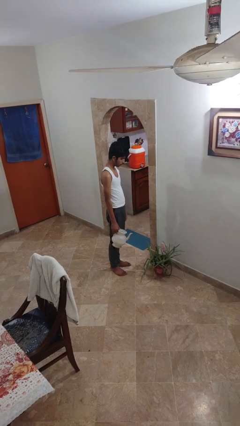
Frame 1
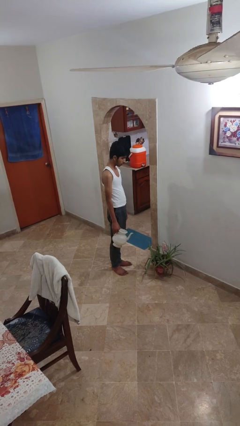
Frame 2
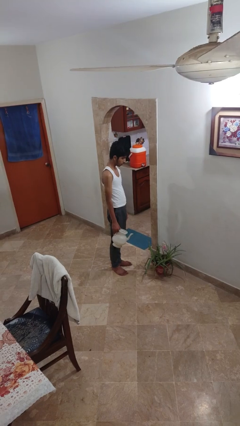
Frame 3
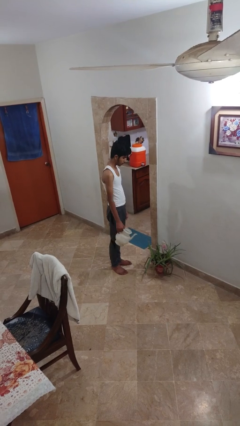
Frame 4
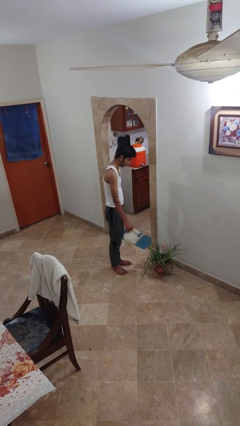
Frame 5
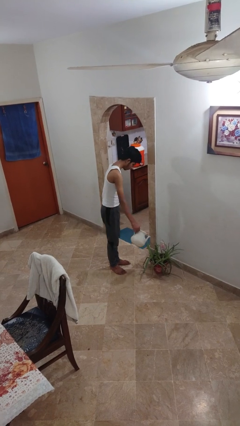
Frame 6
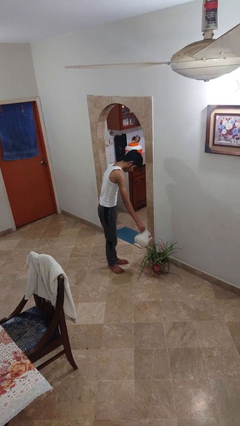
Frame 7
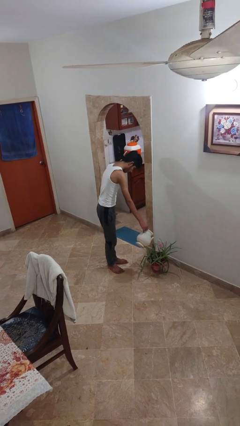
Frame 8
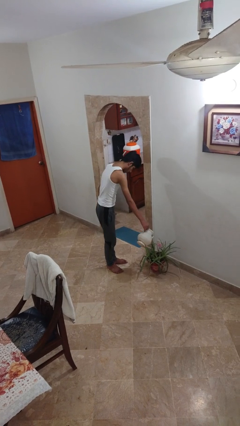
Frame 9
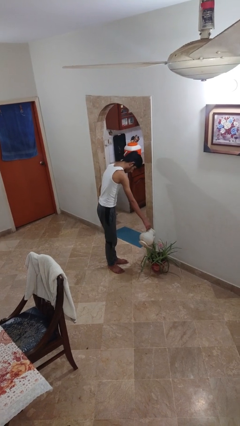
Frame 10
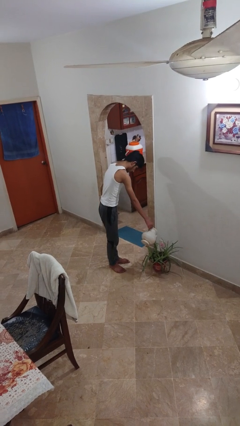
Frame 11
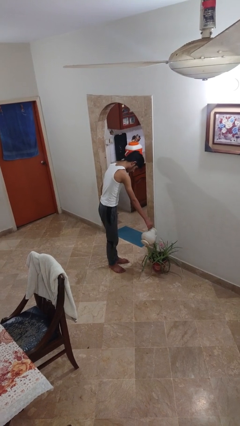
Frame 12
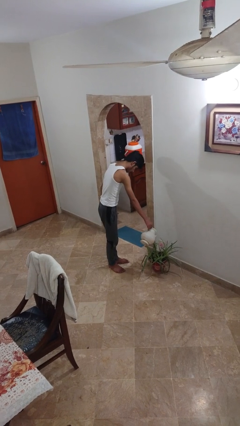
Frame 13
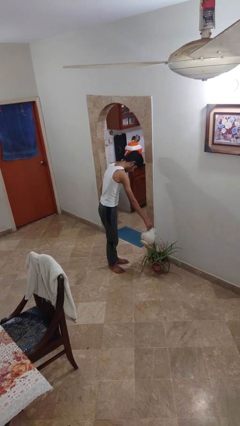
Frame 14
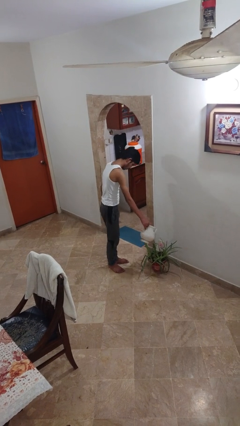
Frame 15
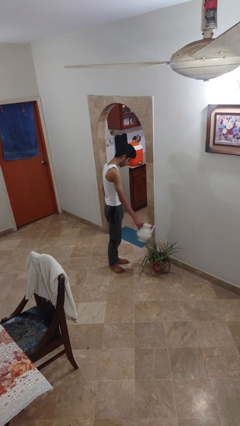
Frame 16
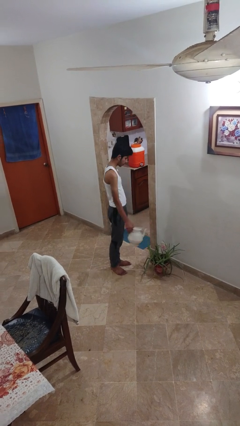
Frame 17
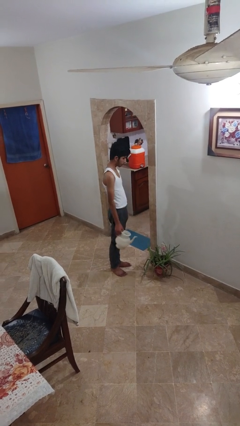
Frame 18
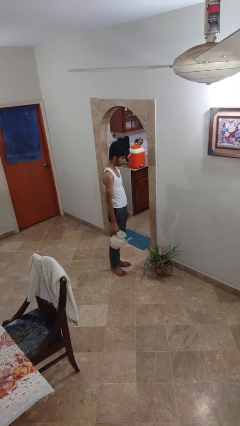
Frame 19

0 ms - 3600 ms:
person waters houseplant

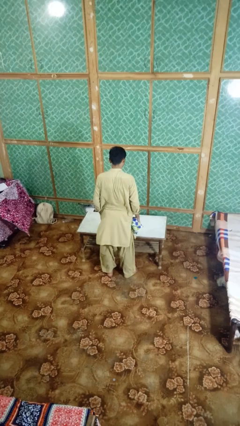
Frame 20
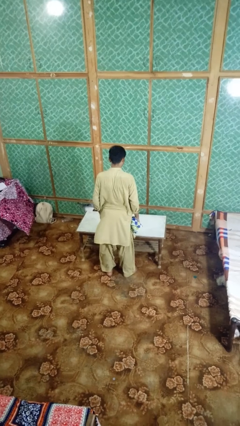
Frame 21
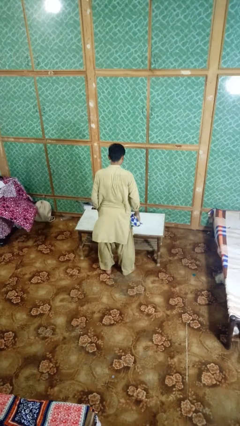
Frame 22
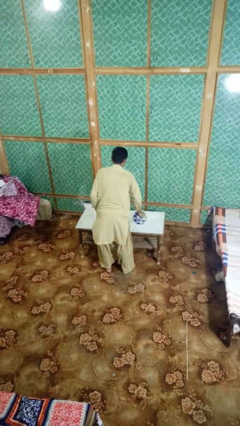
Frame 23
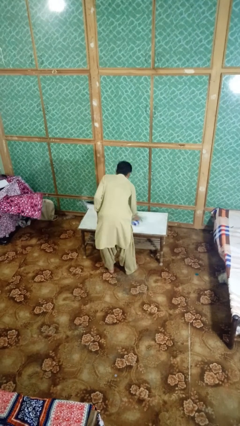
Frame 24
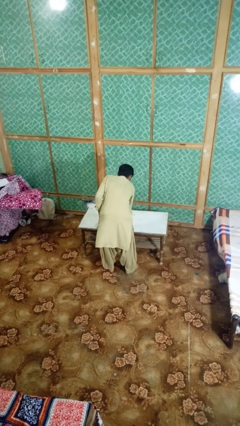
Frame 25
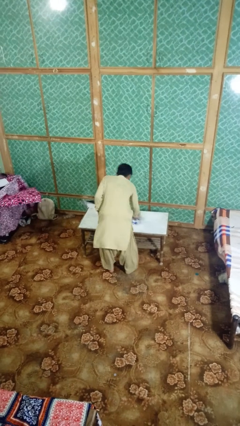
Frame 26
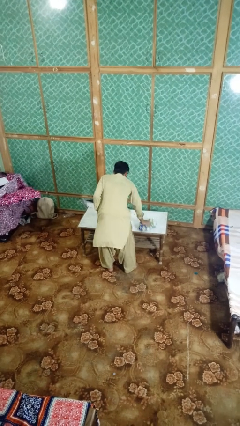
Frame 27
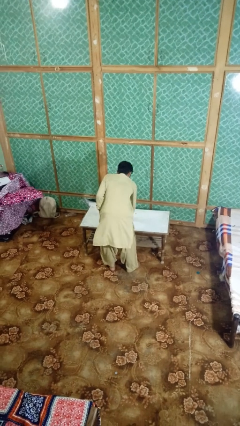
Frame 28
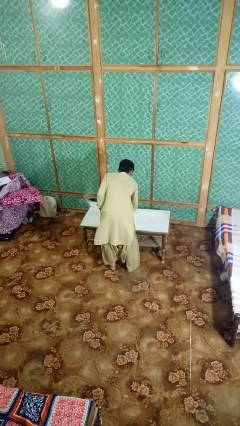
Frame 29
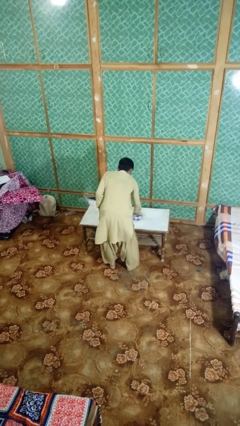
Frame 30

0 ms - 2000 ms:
person cleans table with rag

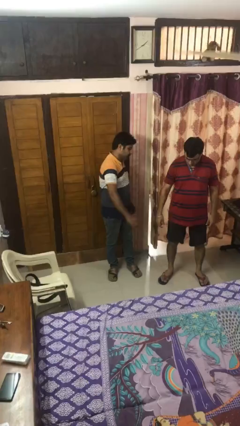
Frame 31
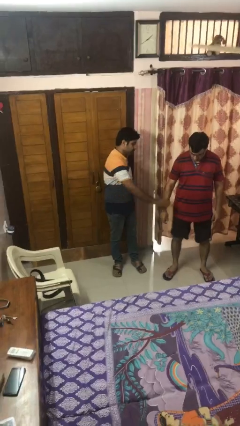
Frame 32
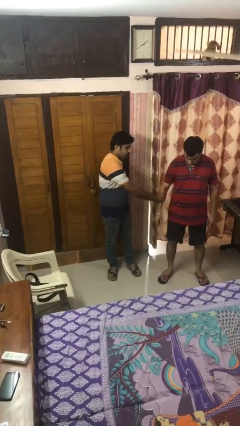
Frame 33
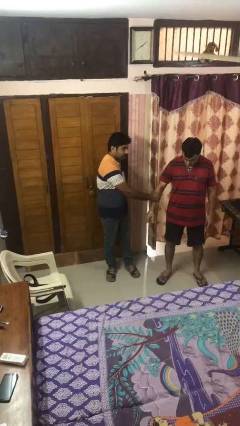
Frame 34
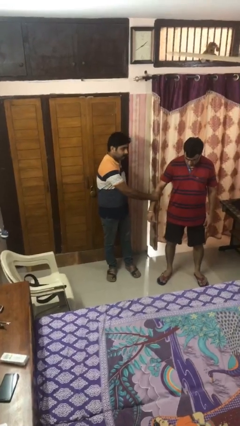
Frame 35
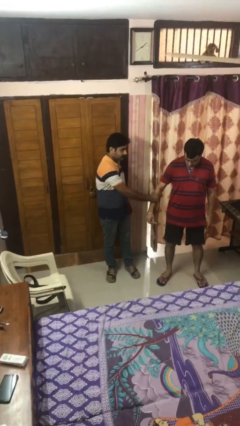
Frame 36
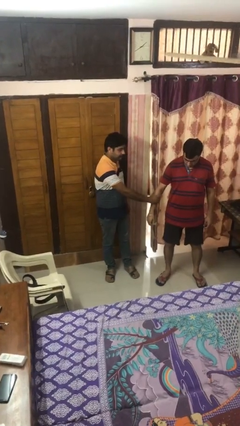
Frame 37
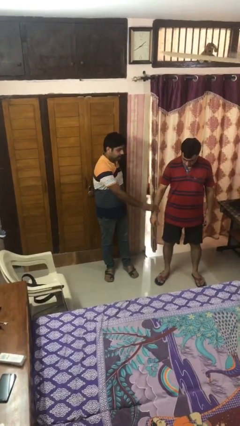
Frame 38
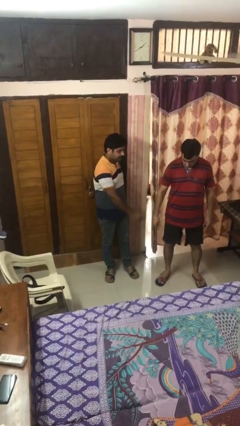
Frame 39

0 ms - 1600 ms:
person grabs person by forearm

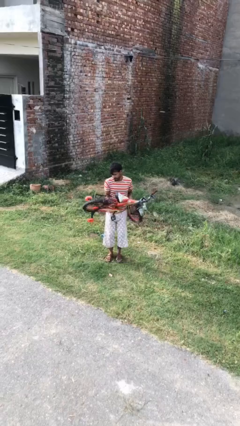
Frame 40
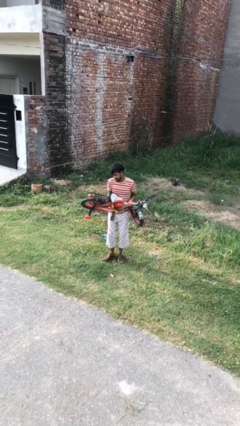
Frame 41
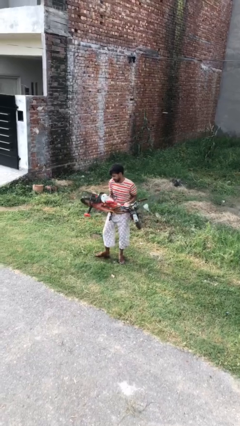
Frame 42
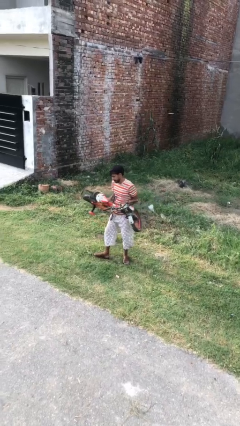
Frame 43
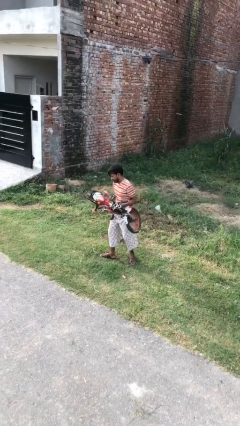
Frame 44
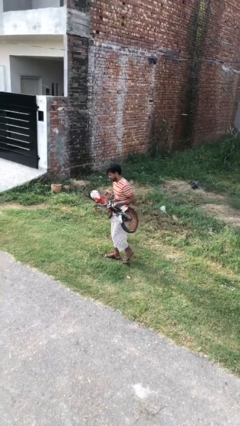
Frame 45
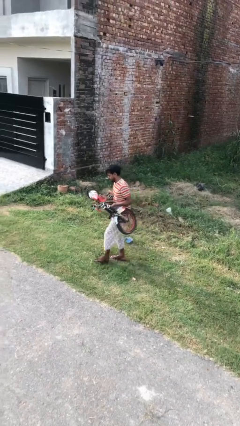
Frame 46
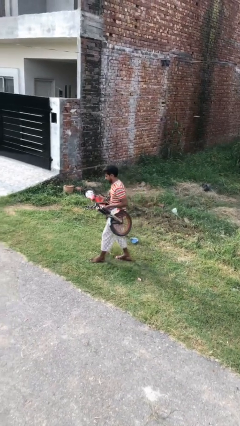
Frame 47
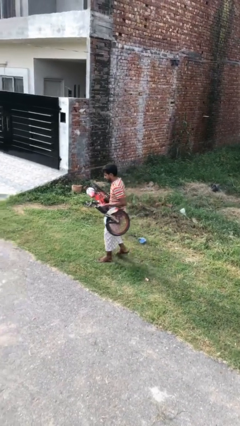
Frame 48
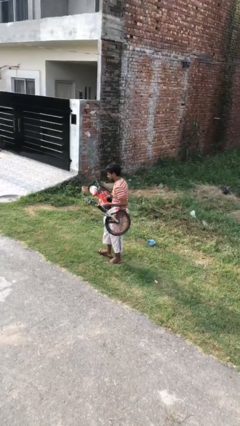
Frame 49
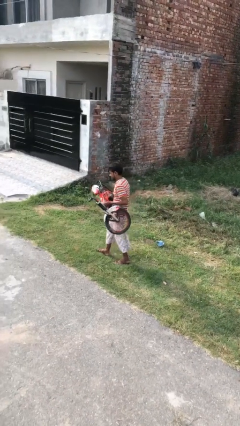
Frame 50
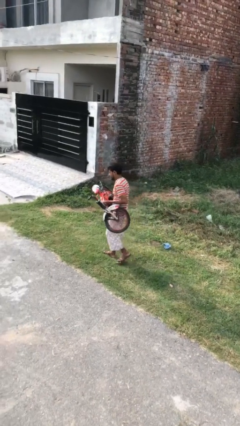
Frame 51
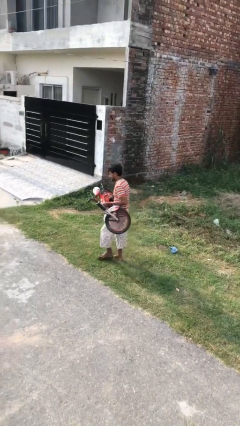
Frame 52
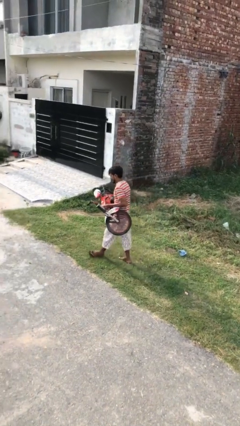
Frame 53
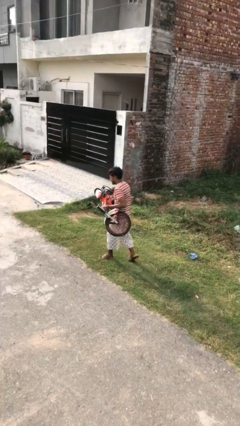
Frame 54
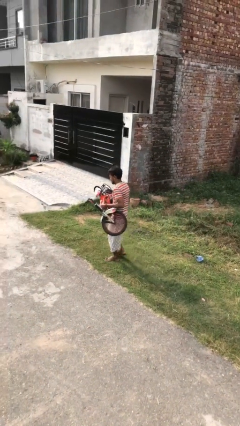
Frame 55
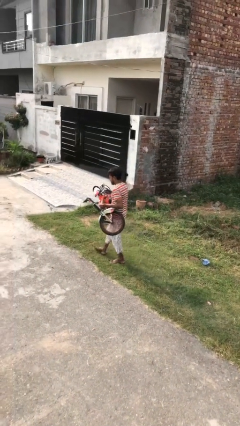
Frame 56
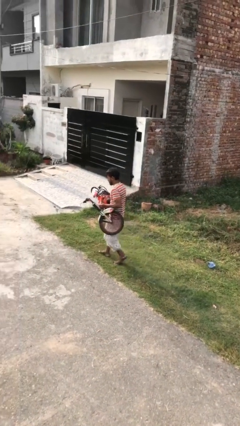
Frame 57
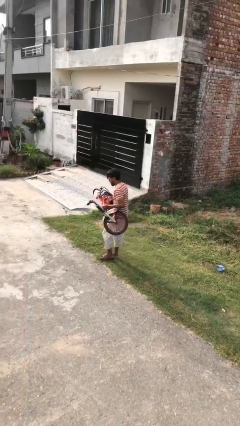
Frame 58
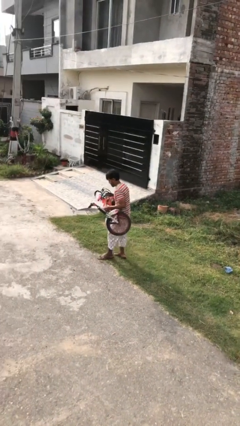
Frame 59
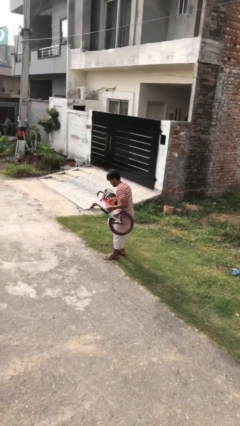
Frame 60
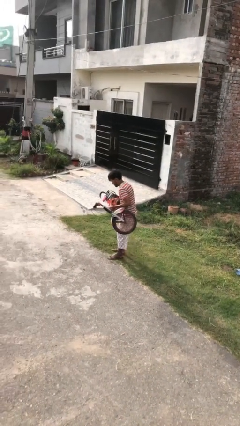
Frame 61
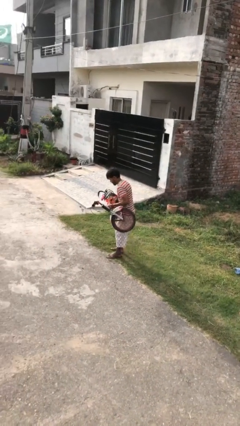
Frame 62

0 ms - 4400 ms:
person carries heavy object

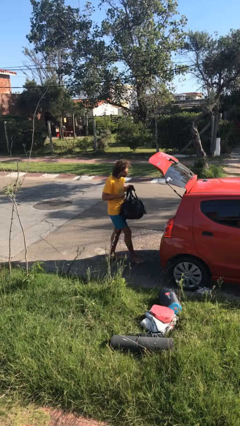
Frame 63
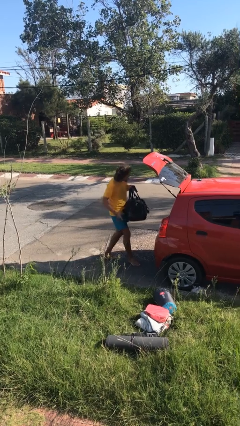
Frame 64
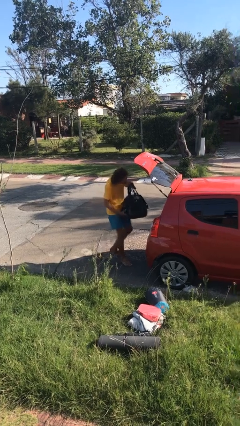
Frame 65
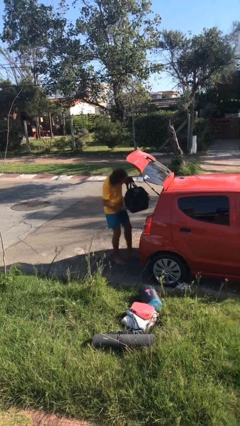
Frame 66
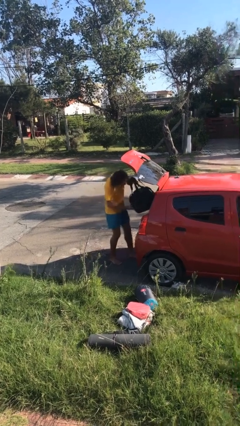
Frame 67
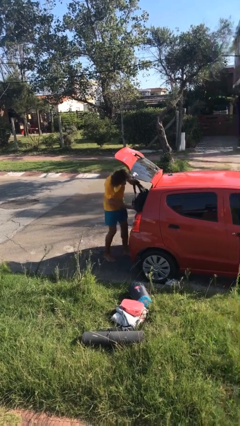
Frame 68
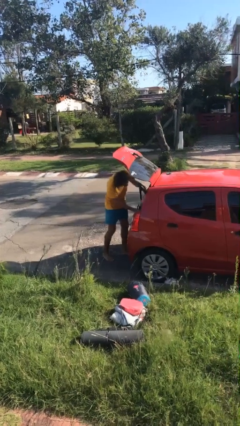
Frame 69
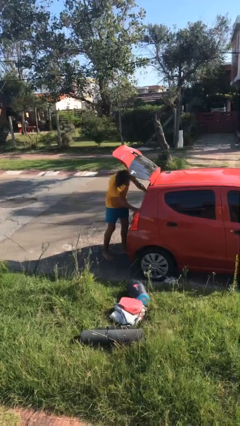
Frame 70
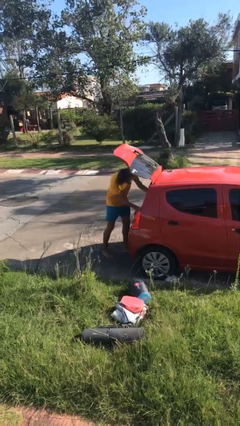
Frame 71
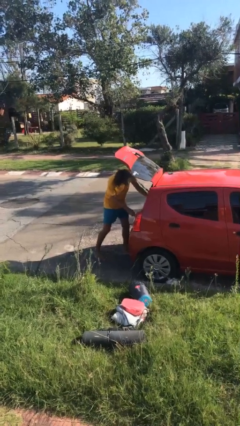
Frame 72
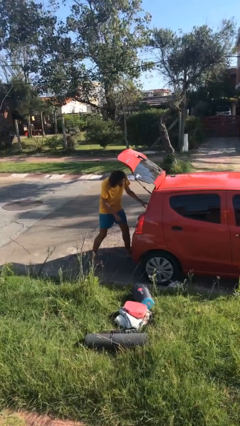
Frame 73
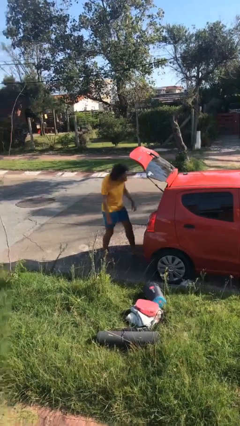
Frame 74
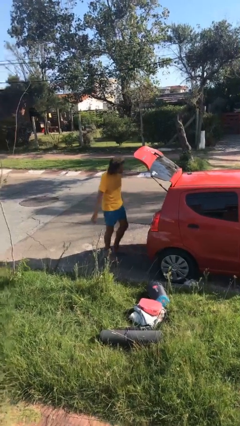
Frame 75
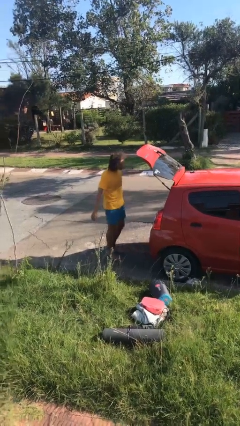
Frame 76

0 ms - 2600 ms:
person loads car

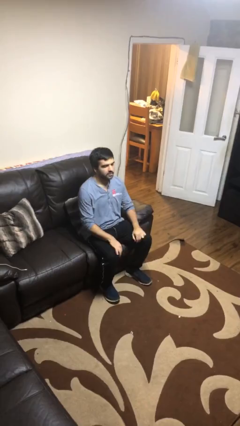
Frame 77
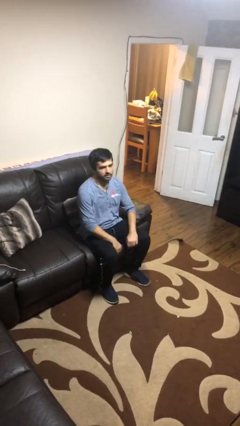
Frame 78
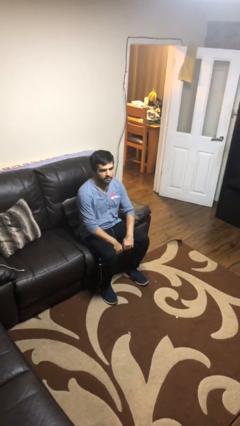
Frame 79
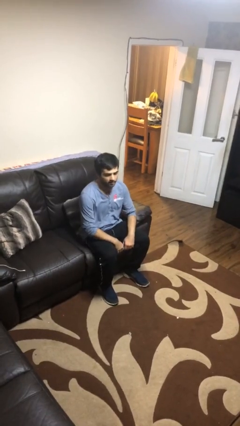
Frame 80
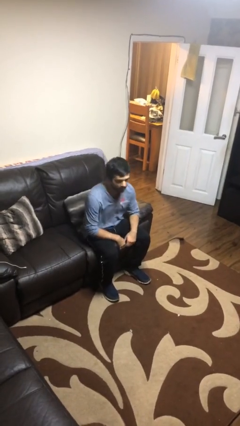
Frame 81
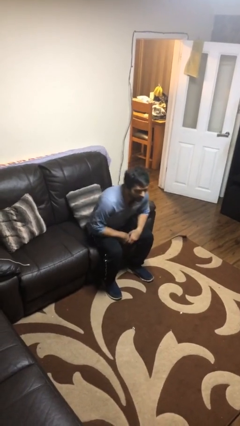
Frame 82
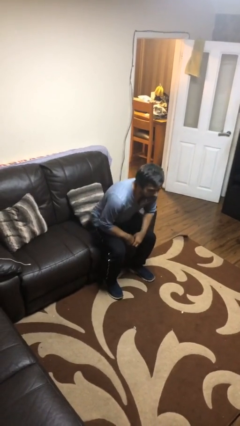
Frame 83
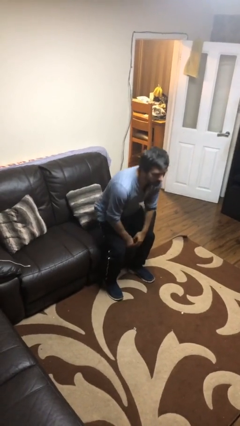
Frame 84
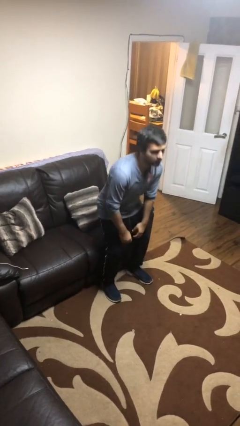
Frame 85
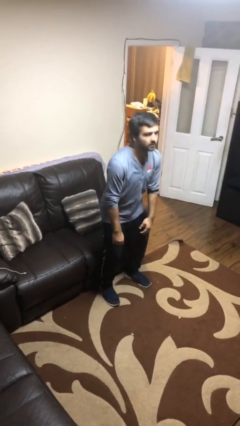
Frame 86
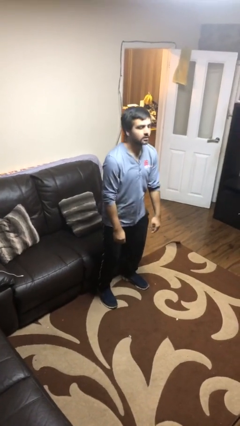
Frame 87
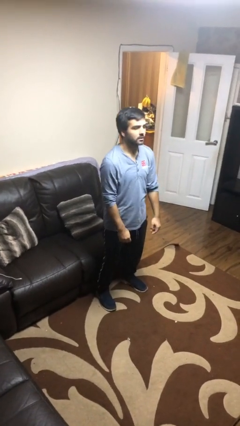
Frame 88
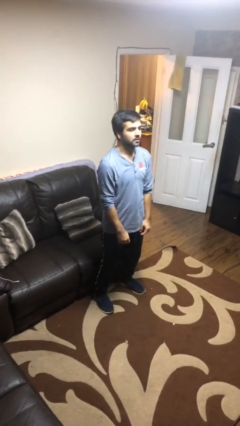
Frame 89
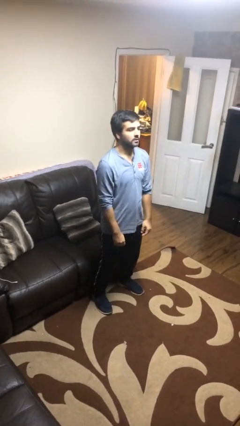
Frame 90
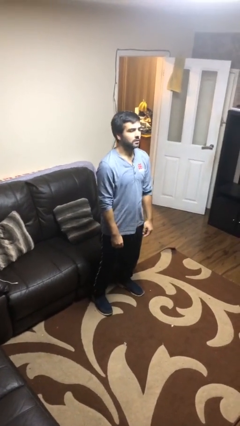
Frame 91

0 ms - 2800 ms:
person stands up

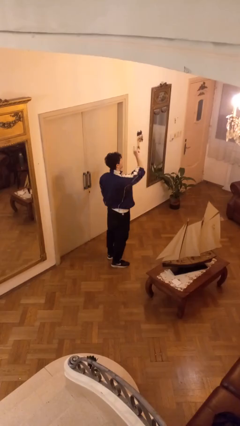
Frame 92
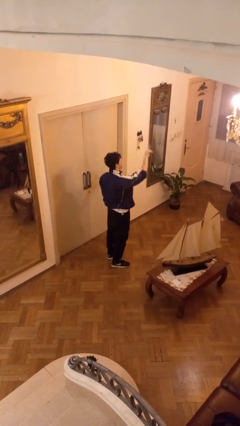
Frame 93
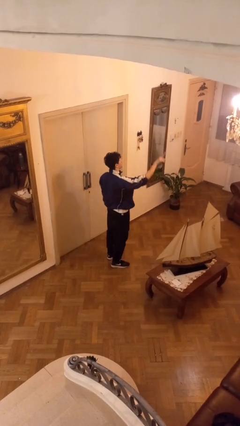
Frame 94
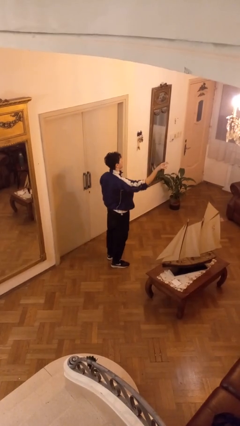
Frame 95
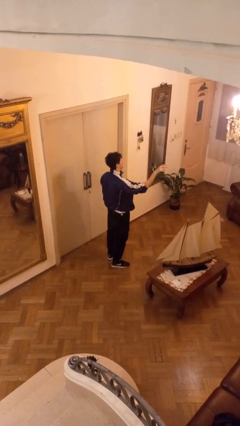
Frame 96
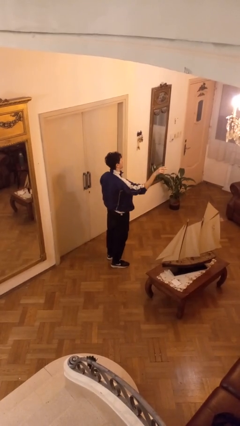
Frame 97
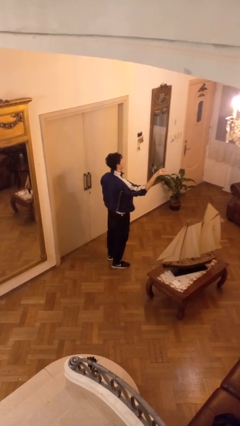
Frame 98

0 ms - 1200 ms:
person gestures swipe right
